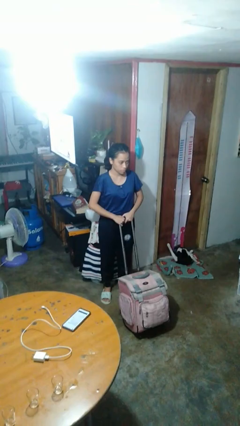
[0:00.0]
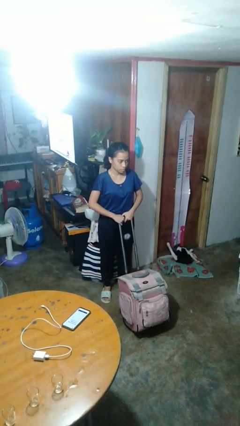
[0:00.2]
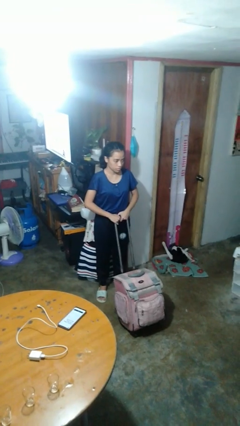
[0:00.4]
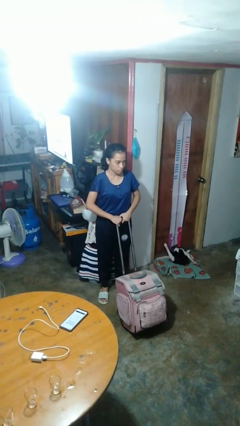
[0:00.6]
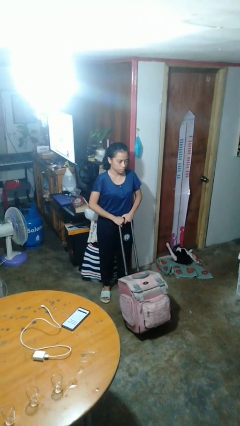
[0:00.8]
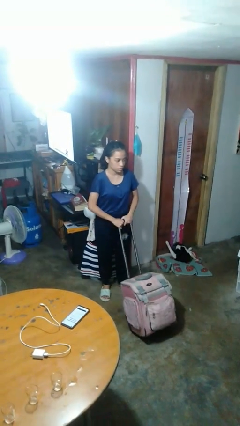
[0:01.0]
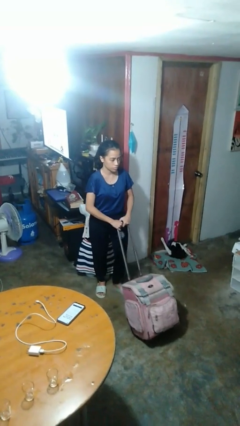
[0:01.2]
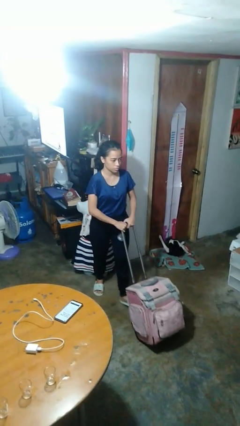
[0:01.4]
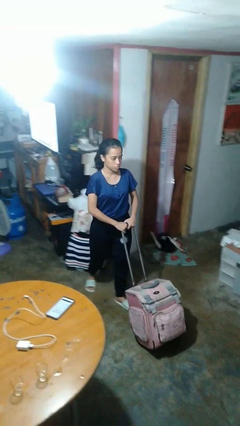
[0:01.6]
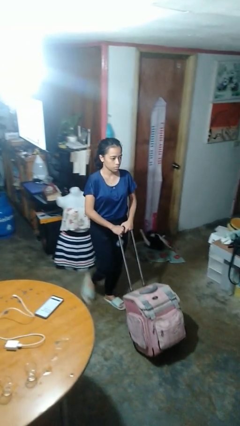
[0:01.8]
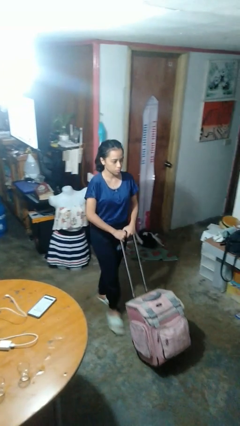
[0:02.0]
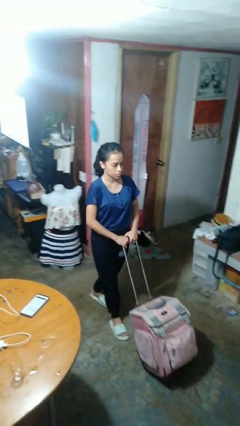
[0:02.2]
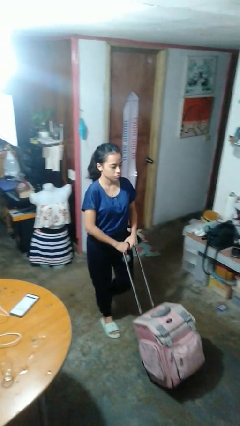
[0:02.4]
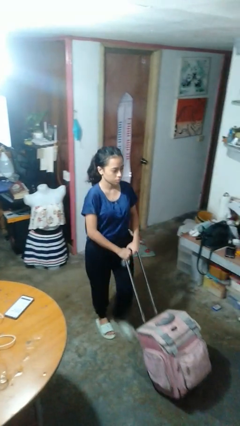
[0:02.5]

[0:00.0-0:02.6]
person pushes wheeled cart

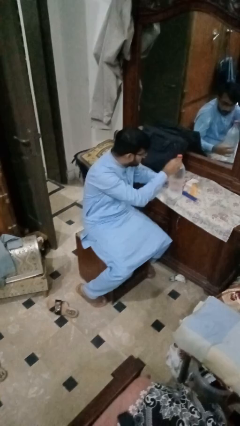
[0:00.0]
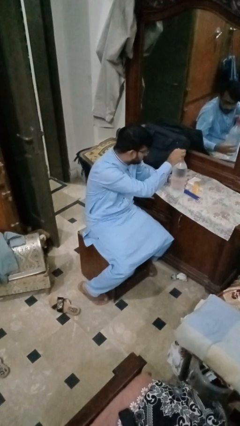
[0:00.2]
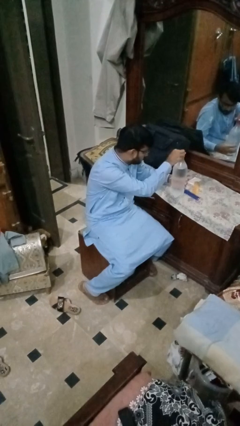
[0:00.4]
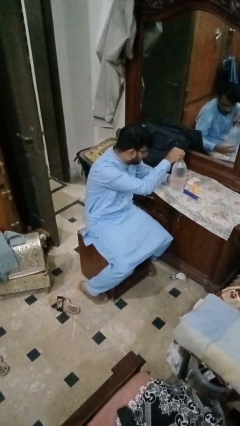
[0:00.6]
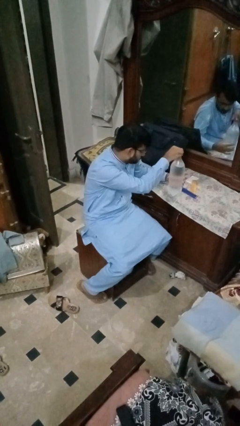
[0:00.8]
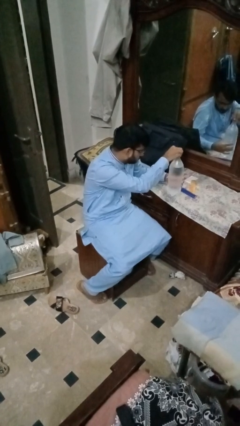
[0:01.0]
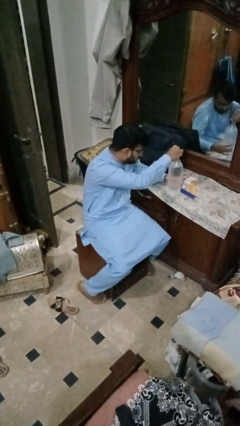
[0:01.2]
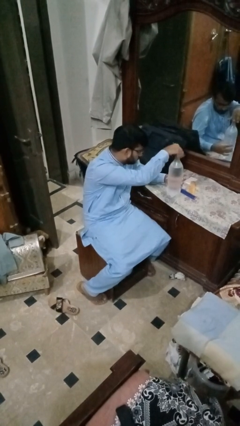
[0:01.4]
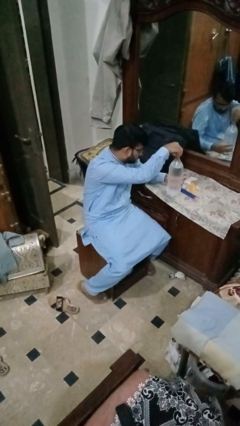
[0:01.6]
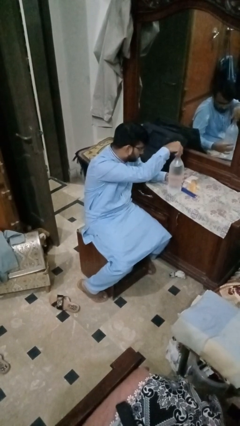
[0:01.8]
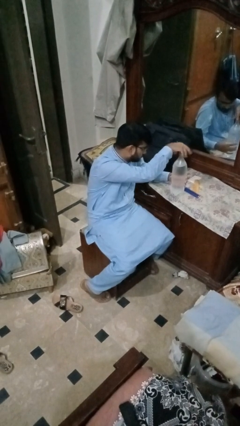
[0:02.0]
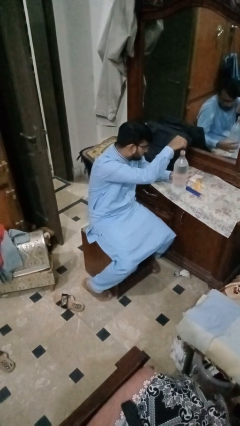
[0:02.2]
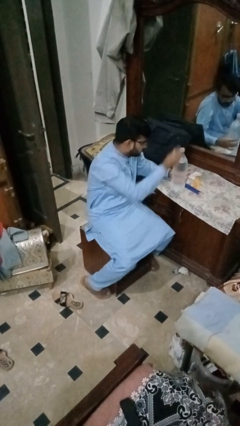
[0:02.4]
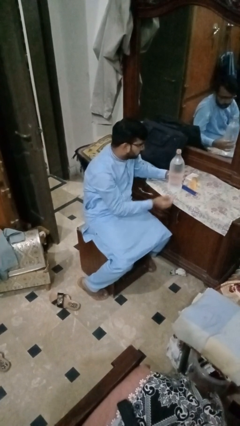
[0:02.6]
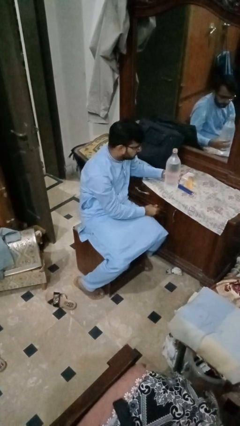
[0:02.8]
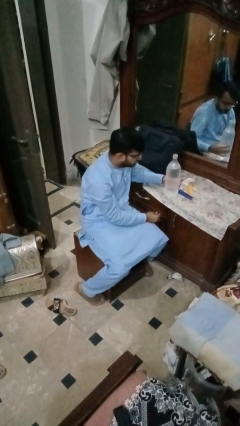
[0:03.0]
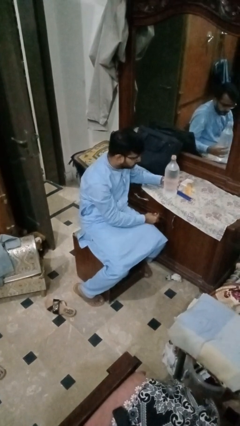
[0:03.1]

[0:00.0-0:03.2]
person unscrews lid from bottle

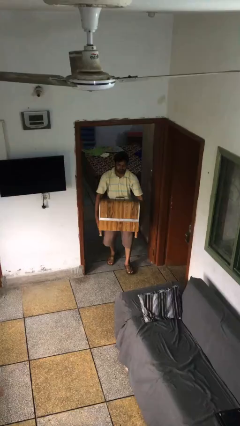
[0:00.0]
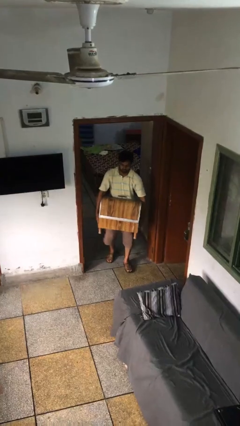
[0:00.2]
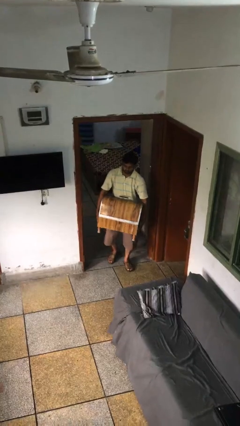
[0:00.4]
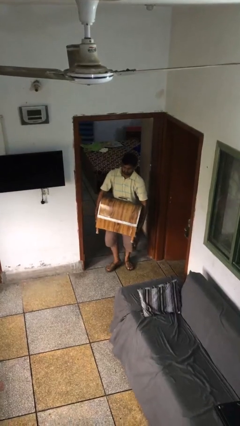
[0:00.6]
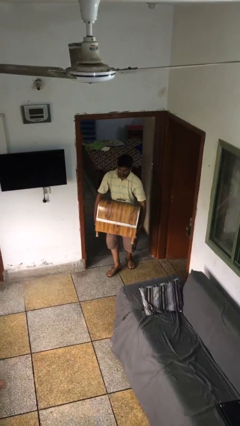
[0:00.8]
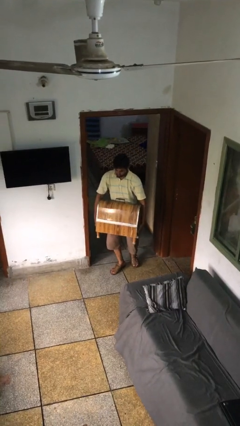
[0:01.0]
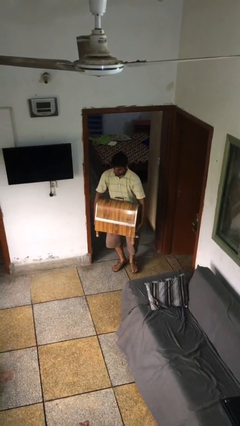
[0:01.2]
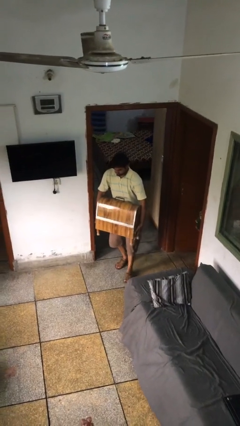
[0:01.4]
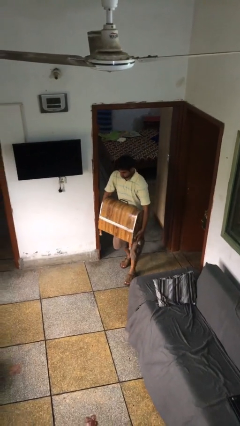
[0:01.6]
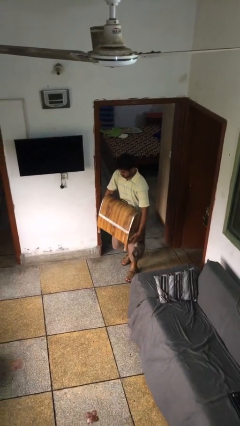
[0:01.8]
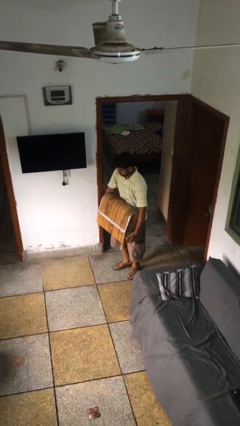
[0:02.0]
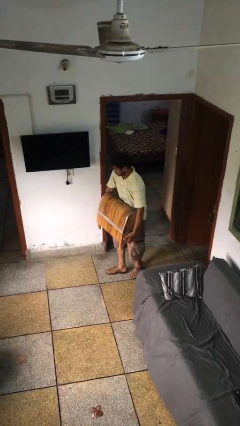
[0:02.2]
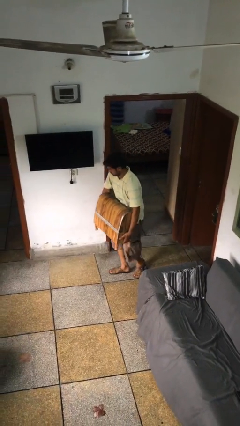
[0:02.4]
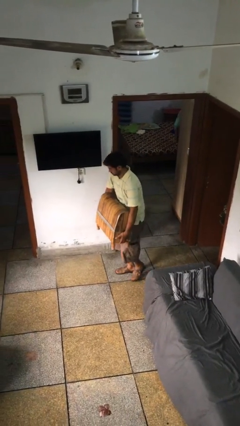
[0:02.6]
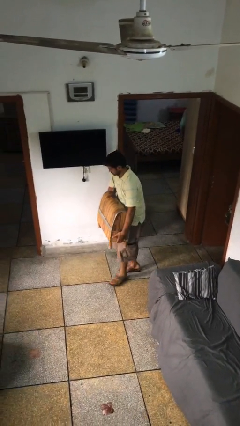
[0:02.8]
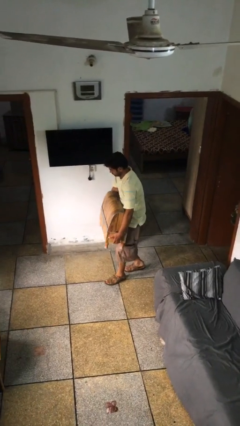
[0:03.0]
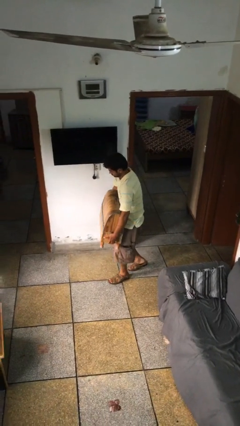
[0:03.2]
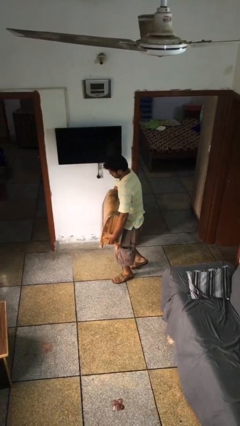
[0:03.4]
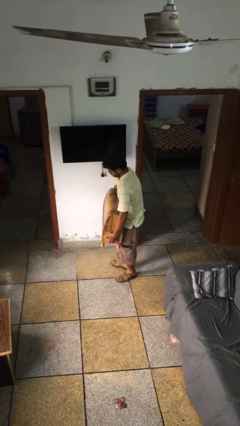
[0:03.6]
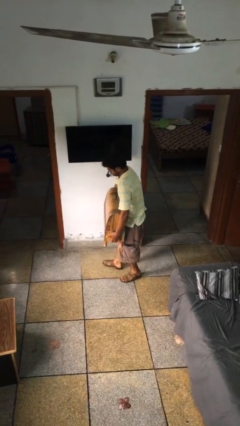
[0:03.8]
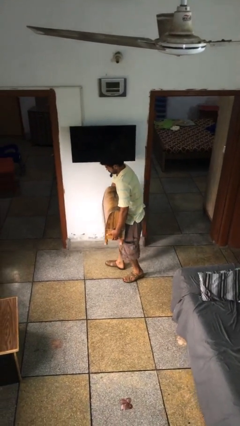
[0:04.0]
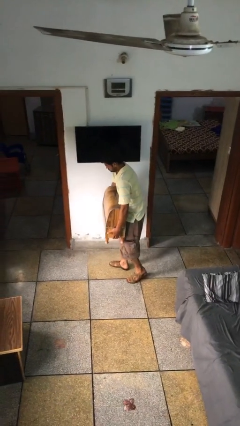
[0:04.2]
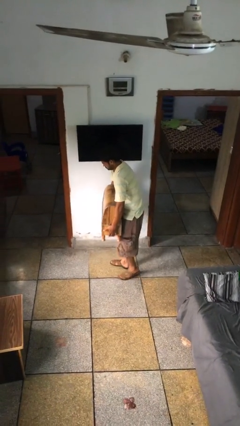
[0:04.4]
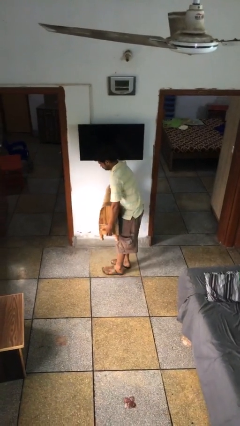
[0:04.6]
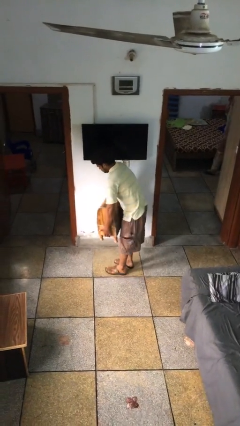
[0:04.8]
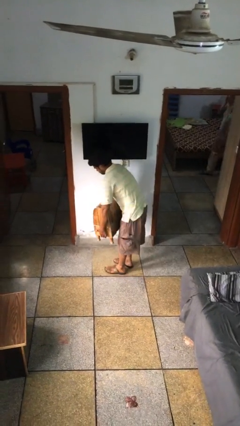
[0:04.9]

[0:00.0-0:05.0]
person carries heavy object

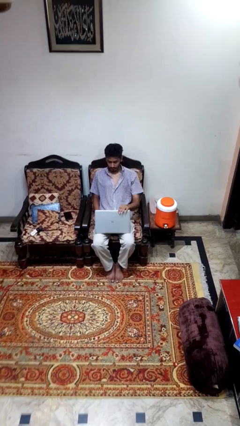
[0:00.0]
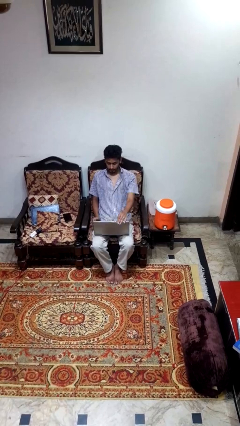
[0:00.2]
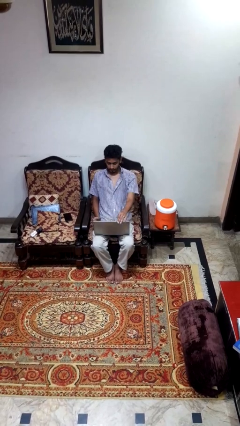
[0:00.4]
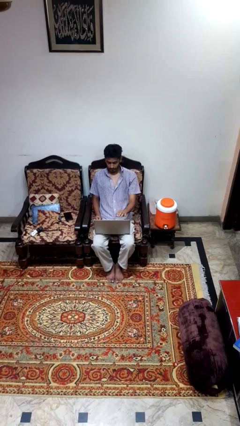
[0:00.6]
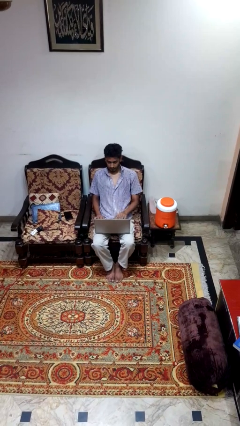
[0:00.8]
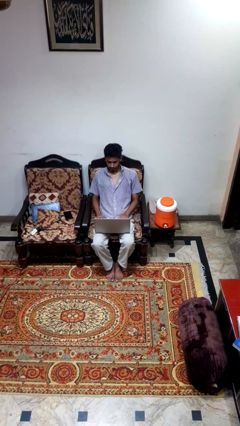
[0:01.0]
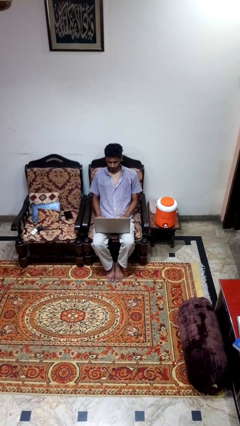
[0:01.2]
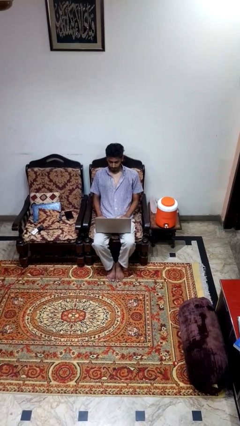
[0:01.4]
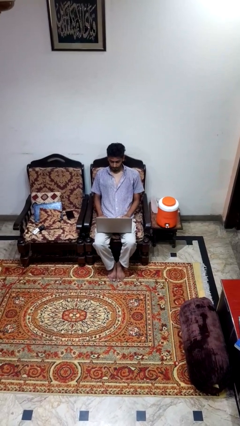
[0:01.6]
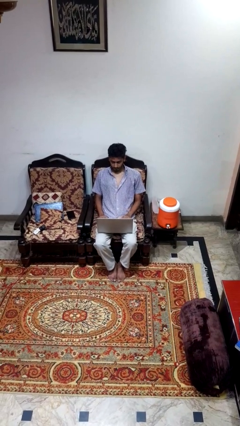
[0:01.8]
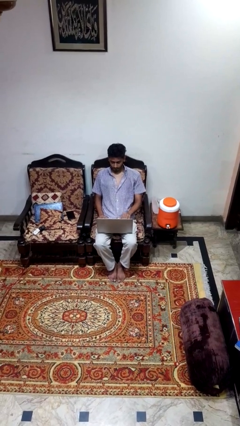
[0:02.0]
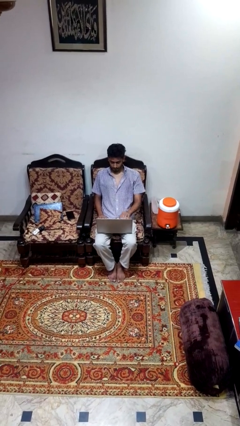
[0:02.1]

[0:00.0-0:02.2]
person opens laptop

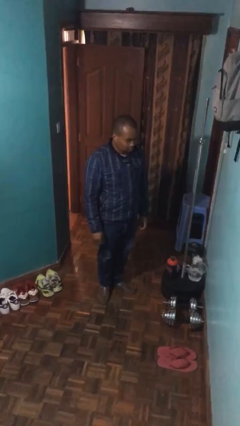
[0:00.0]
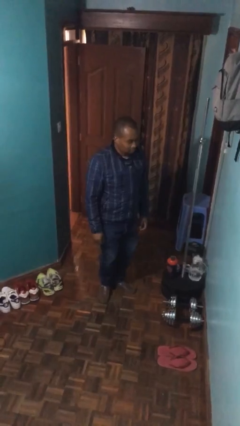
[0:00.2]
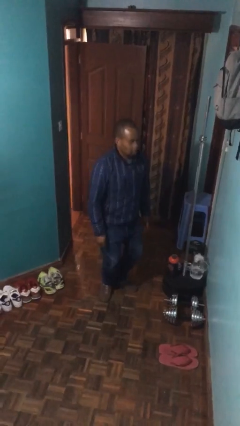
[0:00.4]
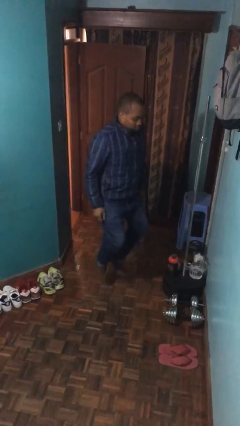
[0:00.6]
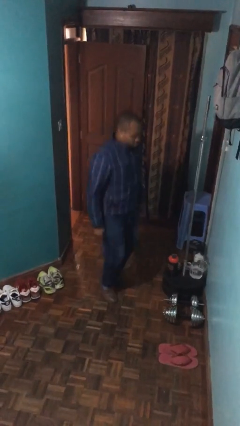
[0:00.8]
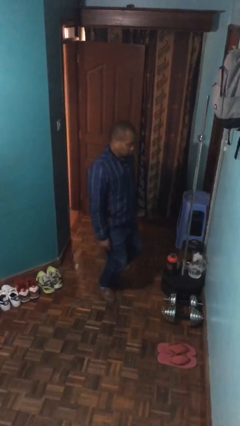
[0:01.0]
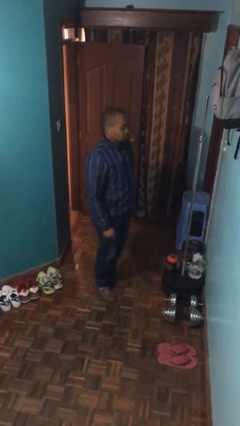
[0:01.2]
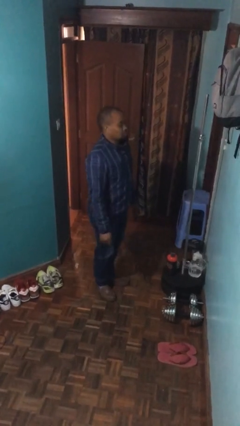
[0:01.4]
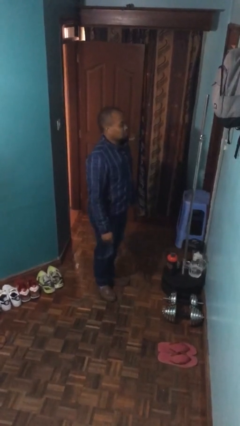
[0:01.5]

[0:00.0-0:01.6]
person jumps

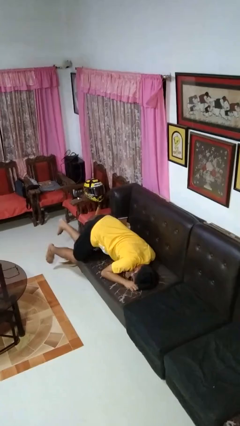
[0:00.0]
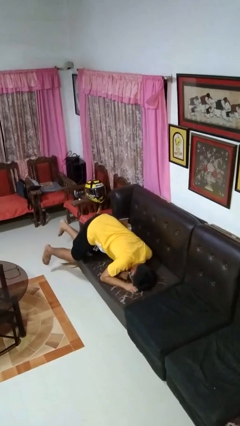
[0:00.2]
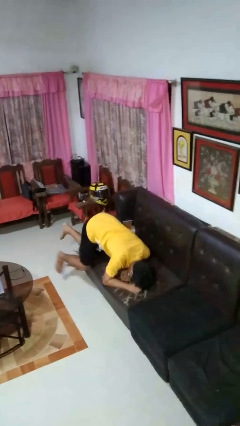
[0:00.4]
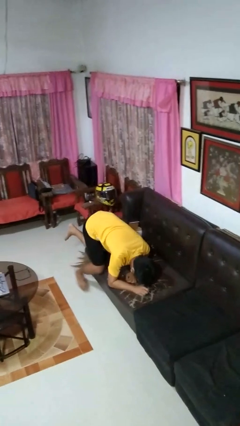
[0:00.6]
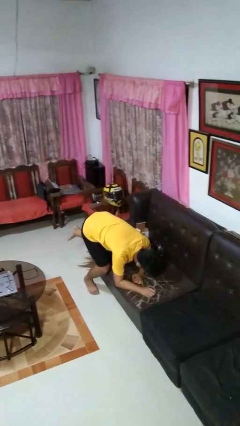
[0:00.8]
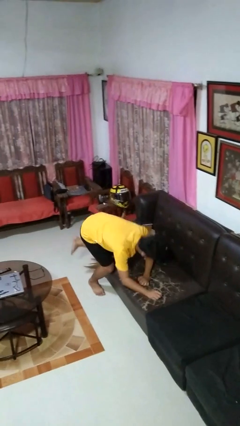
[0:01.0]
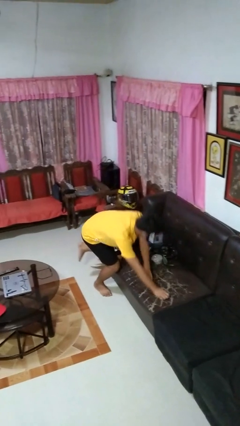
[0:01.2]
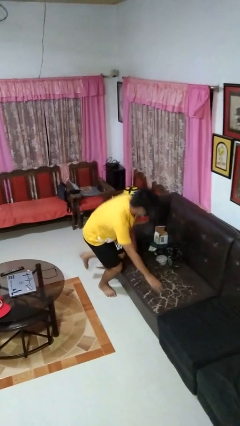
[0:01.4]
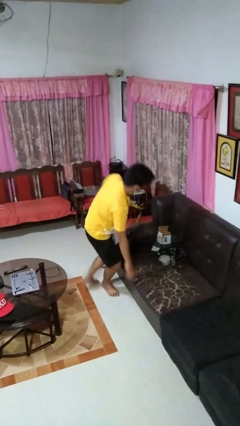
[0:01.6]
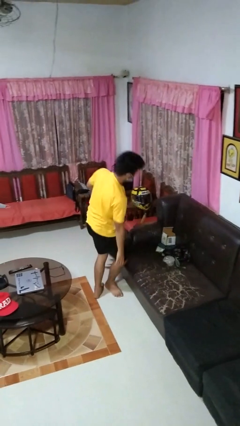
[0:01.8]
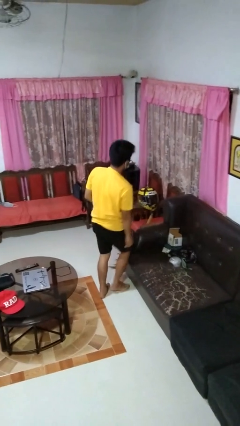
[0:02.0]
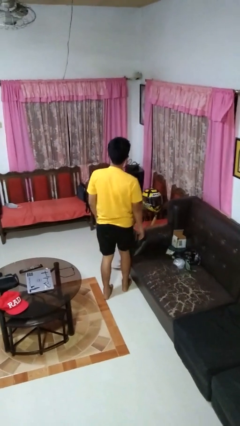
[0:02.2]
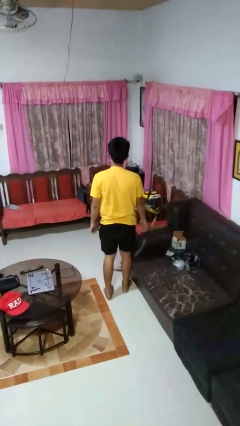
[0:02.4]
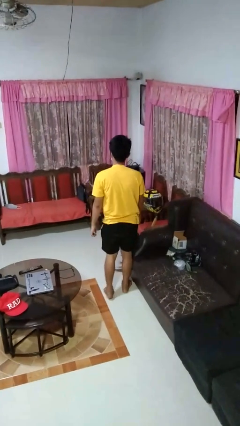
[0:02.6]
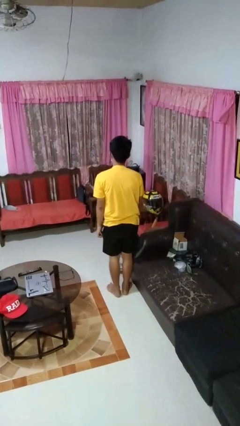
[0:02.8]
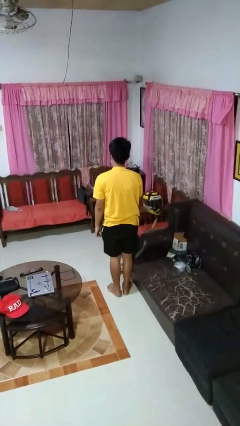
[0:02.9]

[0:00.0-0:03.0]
person stands up
